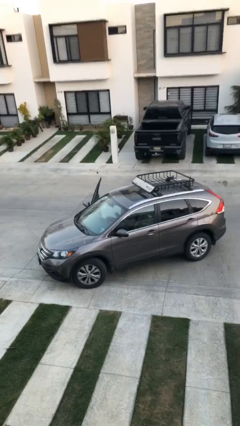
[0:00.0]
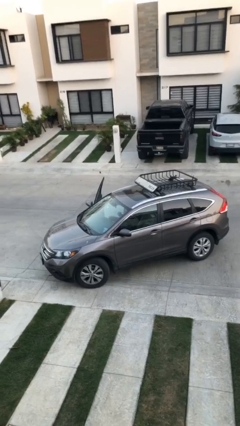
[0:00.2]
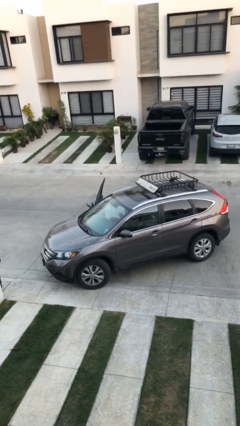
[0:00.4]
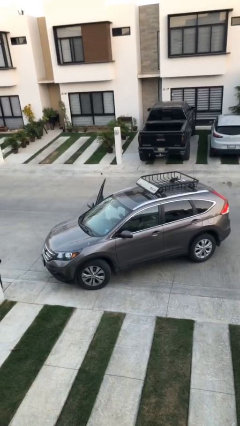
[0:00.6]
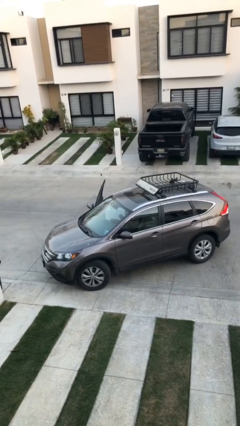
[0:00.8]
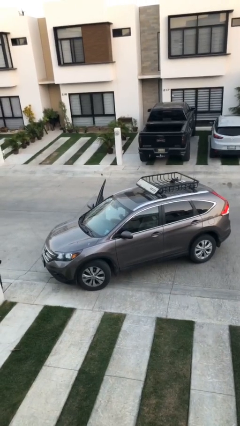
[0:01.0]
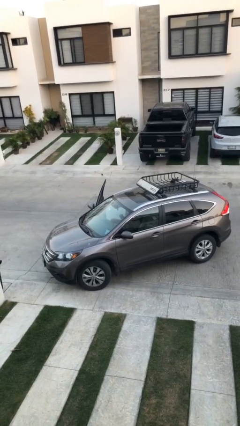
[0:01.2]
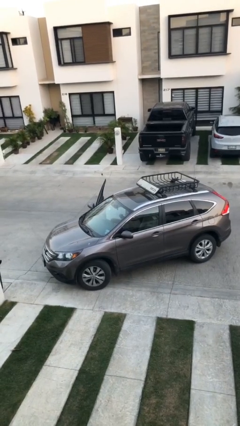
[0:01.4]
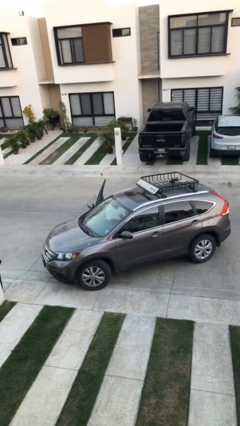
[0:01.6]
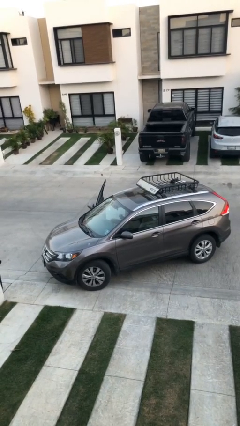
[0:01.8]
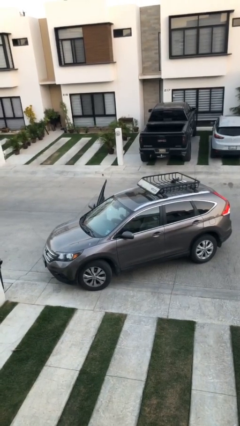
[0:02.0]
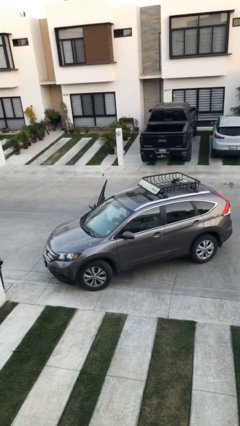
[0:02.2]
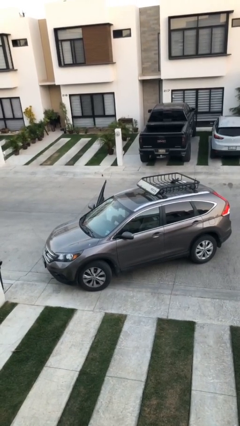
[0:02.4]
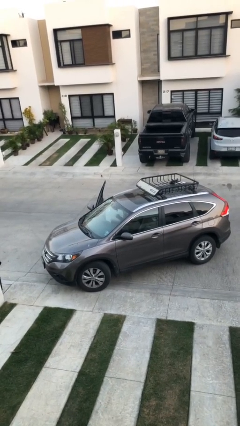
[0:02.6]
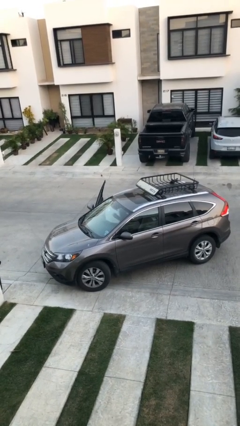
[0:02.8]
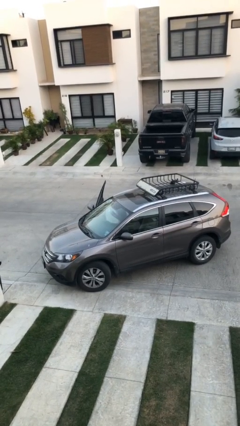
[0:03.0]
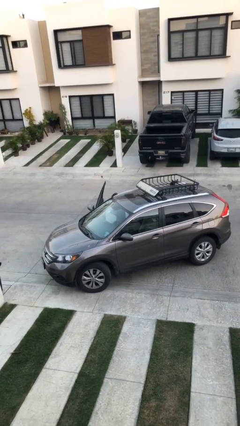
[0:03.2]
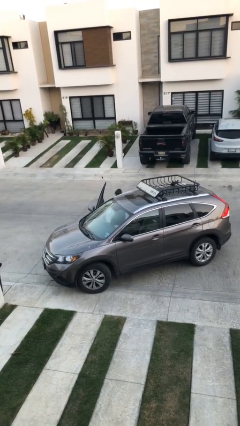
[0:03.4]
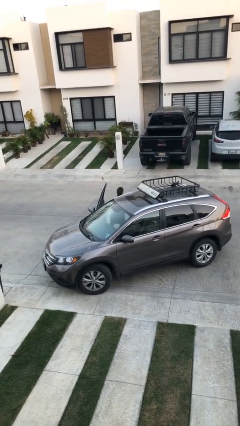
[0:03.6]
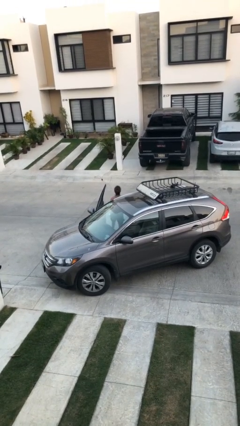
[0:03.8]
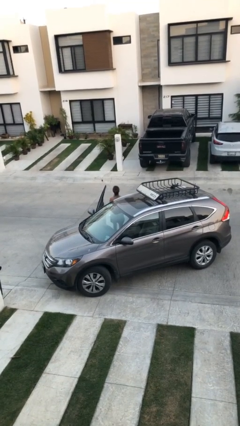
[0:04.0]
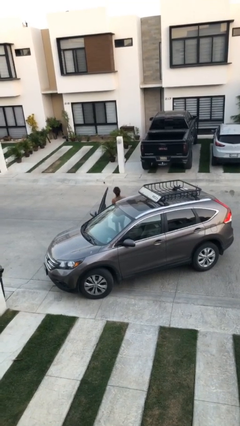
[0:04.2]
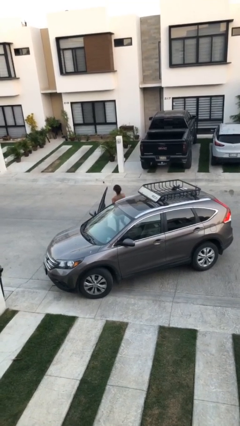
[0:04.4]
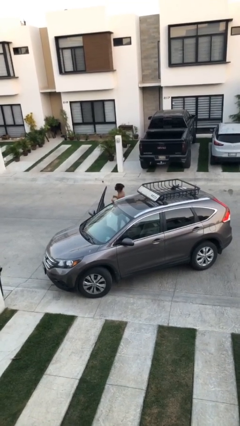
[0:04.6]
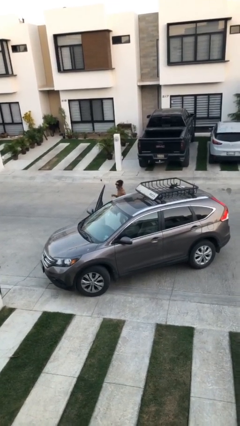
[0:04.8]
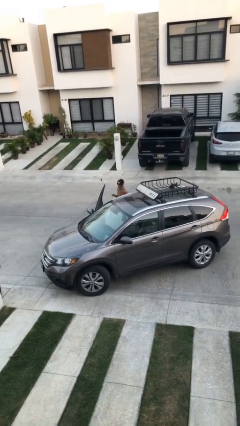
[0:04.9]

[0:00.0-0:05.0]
person exits car

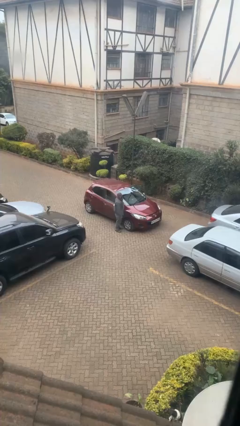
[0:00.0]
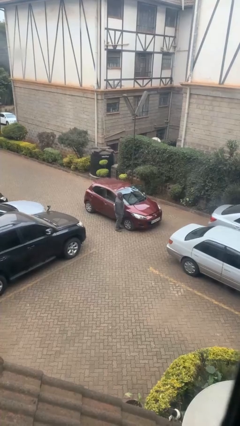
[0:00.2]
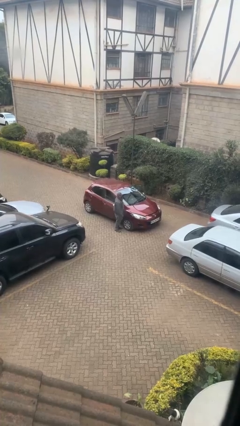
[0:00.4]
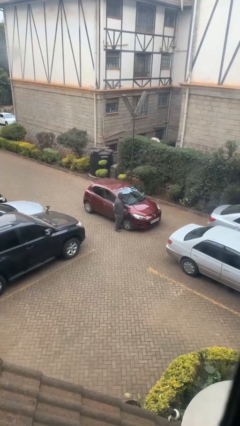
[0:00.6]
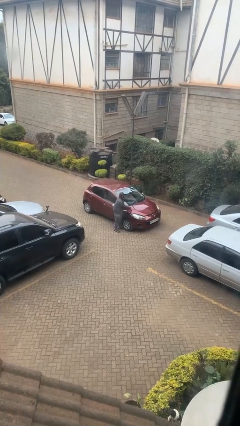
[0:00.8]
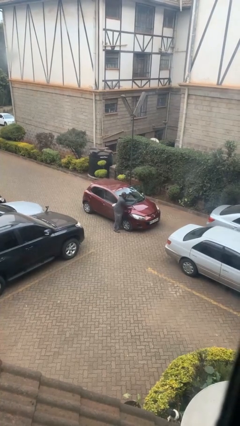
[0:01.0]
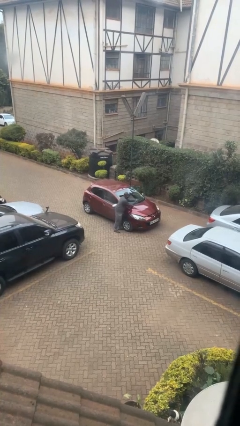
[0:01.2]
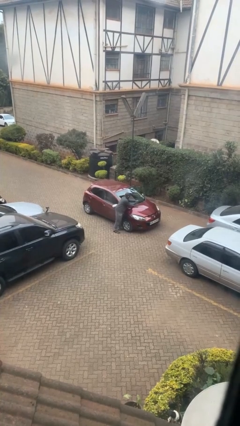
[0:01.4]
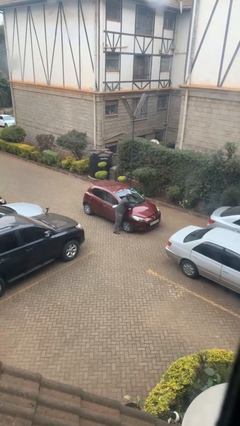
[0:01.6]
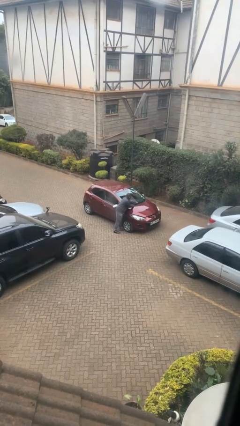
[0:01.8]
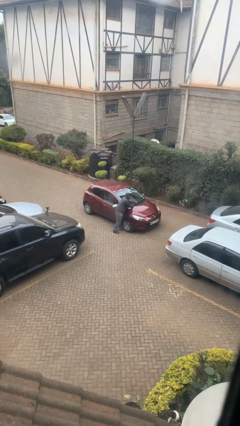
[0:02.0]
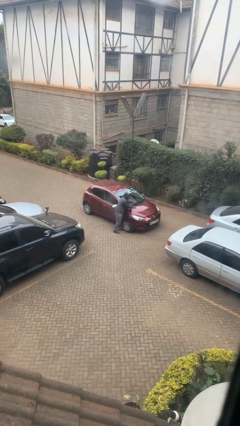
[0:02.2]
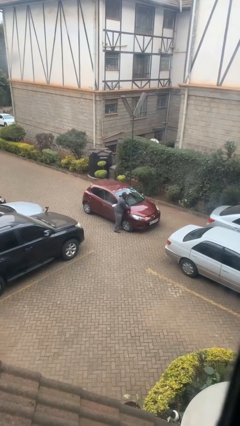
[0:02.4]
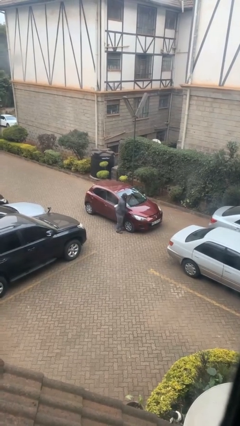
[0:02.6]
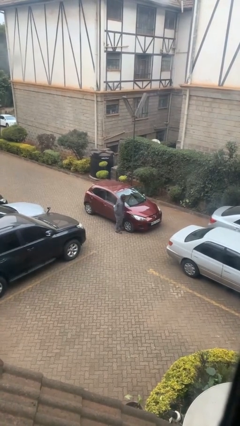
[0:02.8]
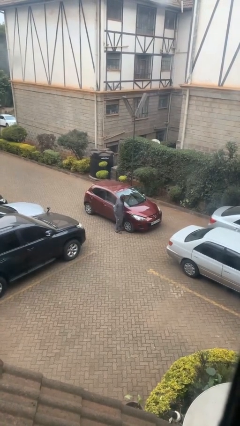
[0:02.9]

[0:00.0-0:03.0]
person flips down car wipers

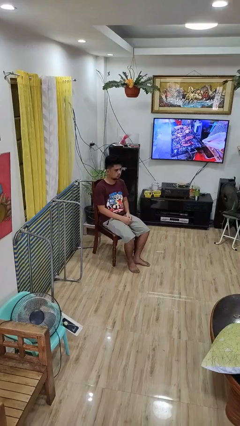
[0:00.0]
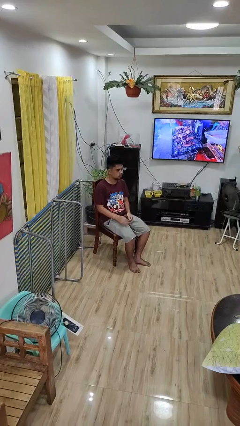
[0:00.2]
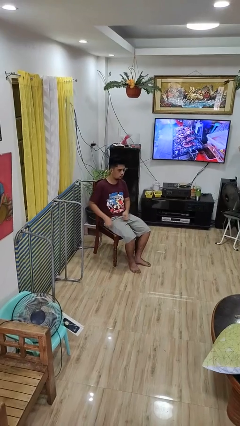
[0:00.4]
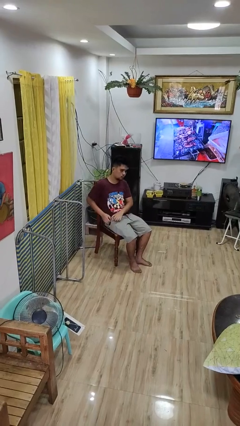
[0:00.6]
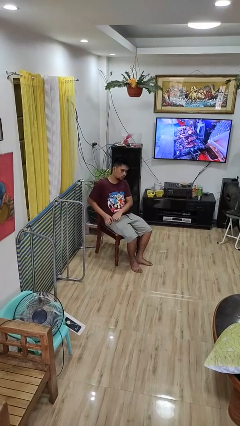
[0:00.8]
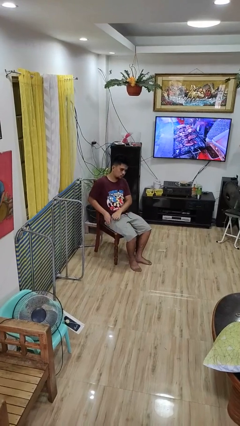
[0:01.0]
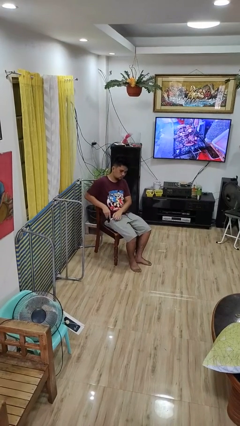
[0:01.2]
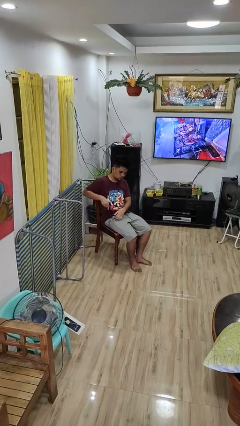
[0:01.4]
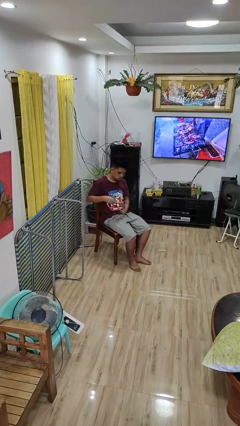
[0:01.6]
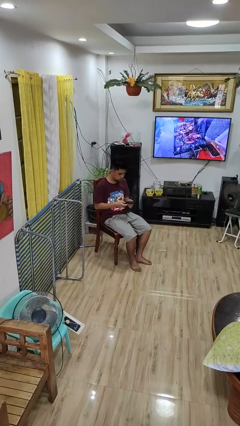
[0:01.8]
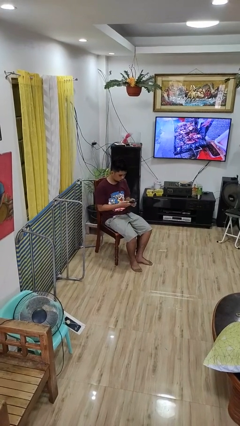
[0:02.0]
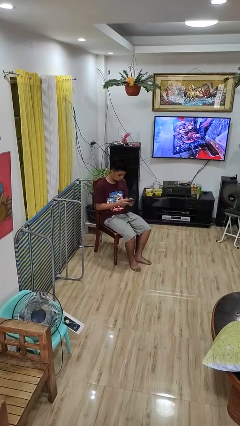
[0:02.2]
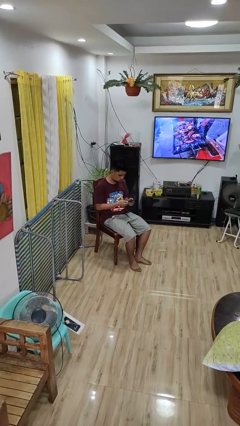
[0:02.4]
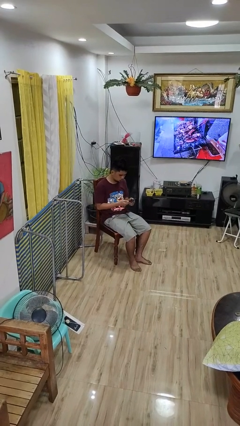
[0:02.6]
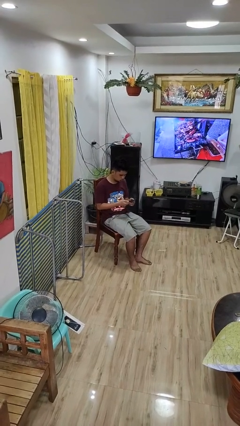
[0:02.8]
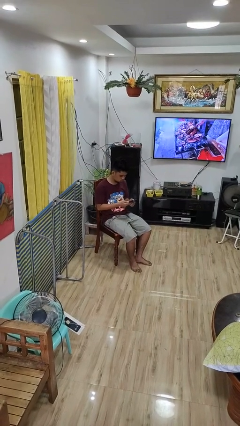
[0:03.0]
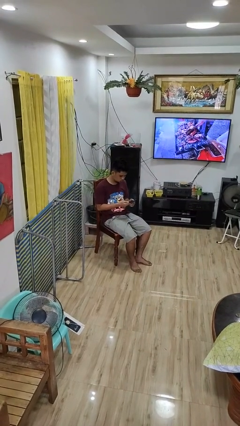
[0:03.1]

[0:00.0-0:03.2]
person takes phone from pocket

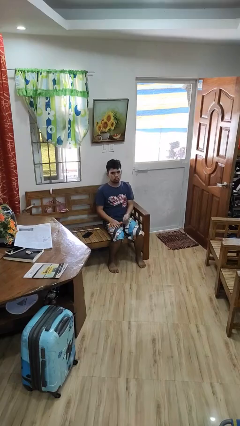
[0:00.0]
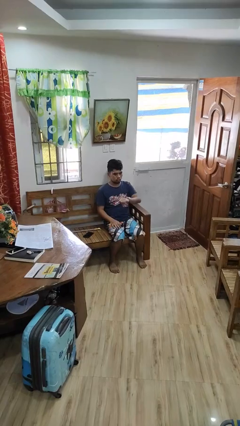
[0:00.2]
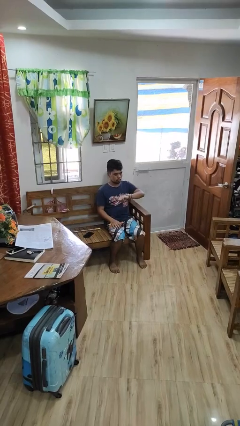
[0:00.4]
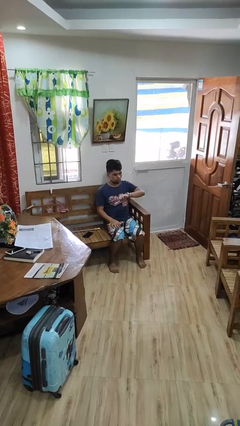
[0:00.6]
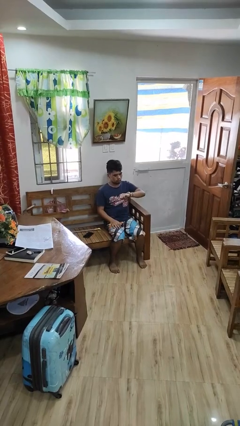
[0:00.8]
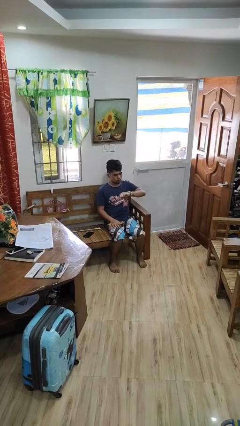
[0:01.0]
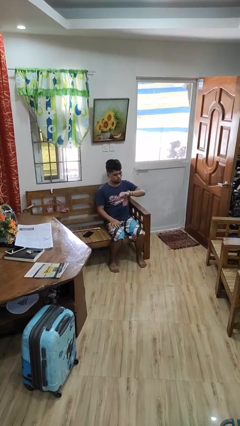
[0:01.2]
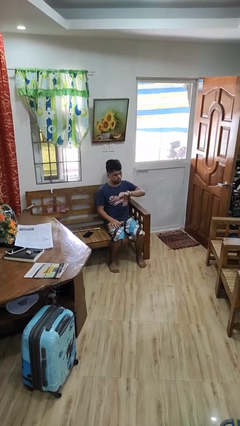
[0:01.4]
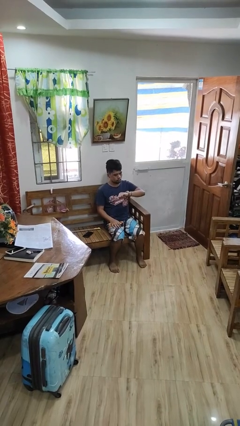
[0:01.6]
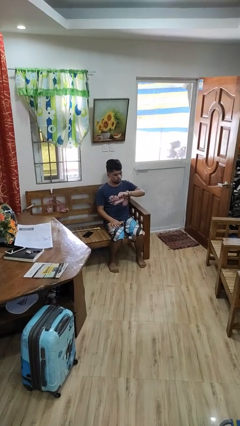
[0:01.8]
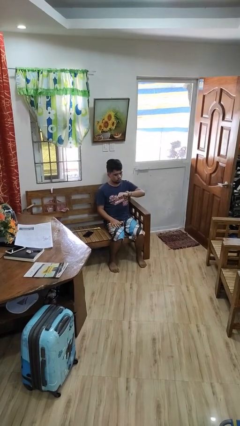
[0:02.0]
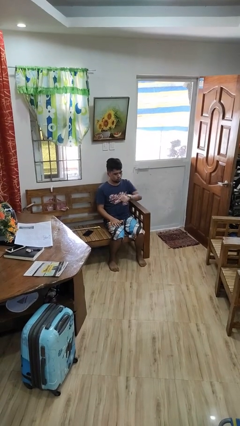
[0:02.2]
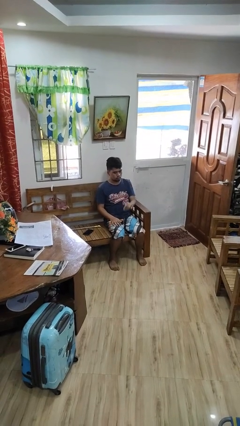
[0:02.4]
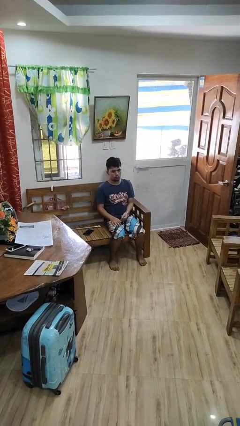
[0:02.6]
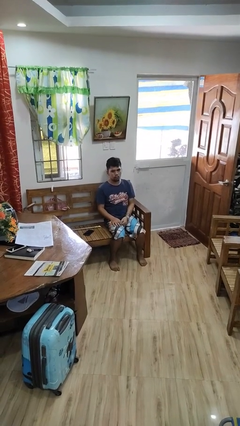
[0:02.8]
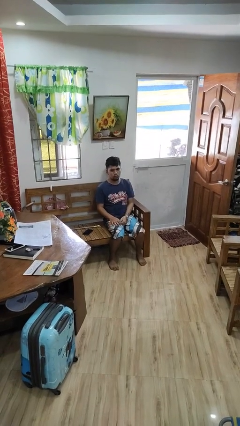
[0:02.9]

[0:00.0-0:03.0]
person looks at wristwatch

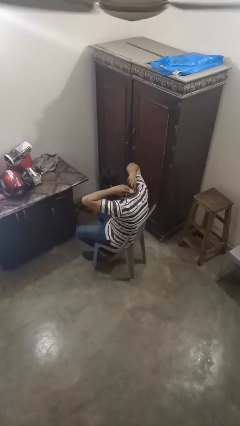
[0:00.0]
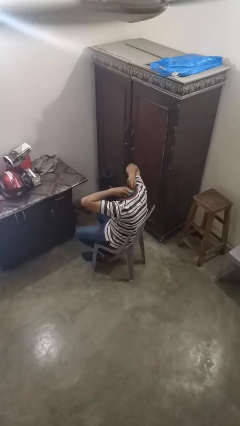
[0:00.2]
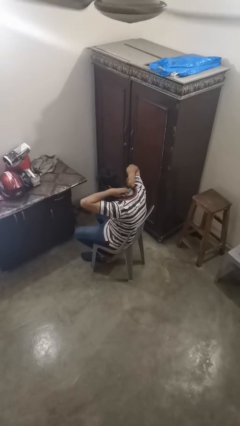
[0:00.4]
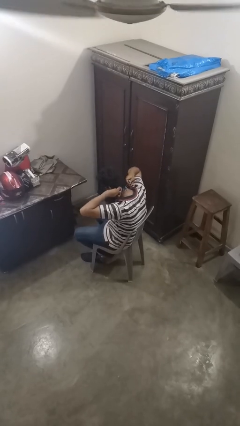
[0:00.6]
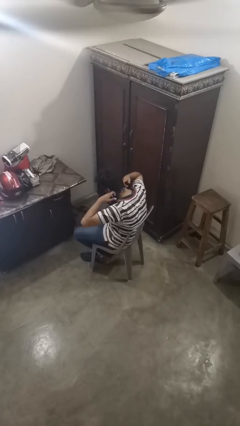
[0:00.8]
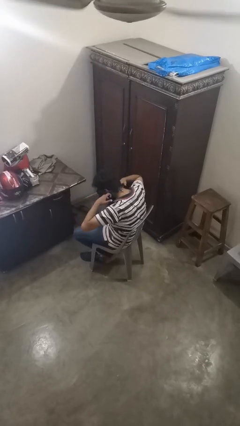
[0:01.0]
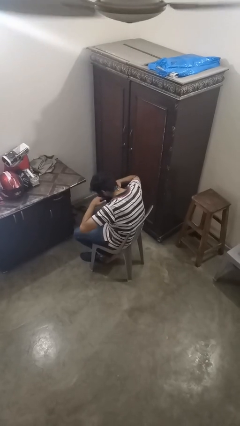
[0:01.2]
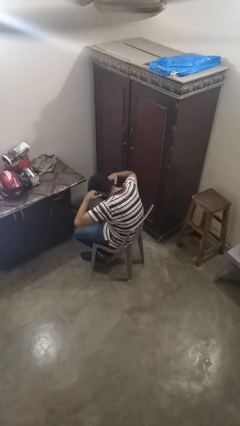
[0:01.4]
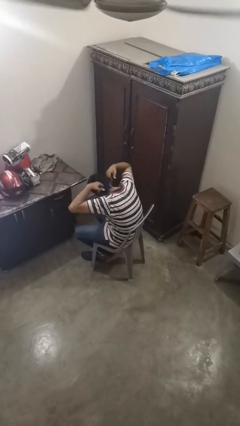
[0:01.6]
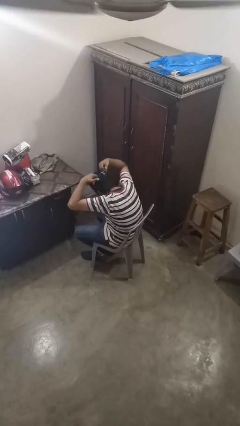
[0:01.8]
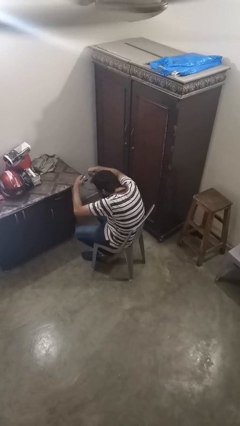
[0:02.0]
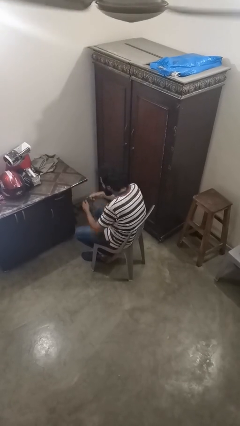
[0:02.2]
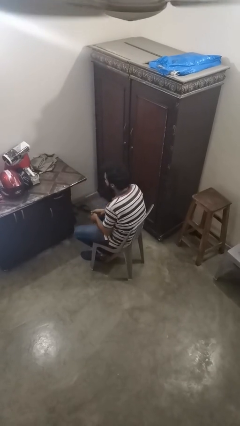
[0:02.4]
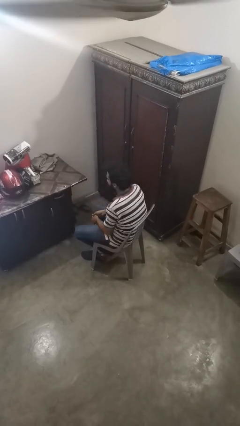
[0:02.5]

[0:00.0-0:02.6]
person takes off necklace

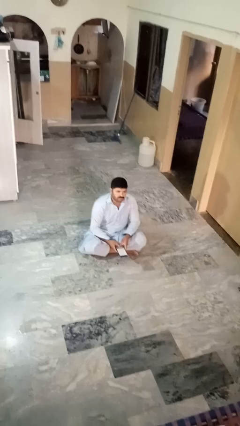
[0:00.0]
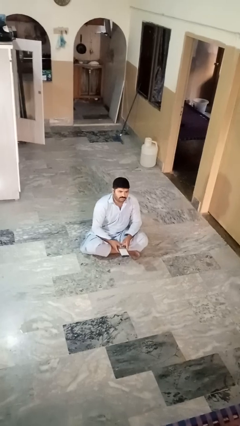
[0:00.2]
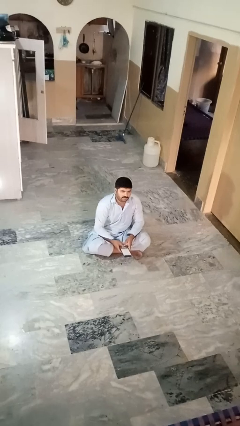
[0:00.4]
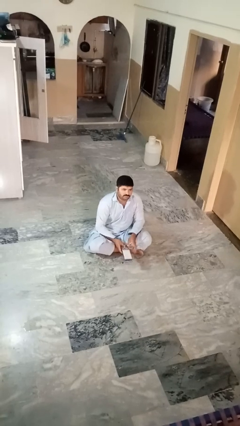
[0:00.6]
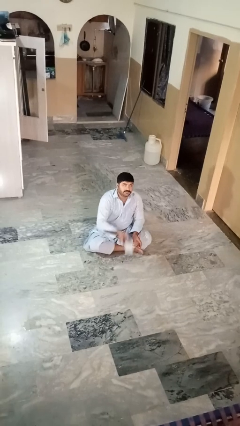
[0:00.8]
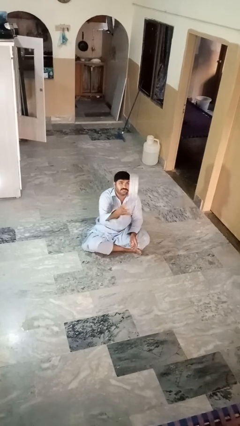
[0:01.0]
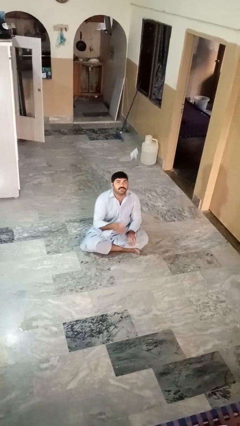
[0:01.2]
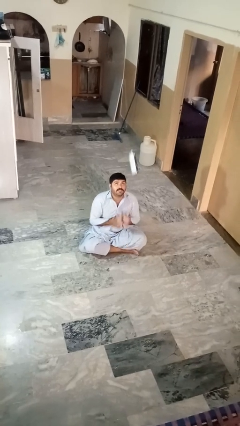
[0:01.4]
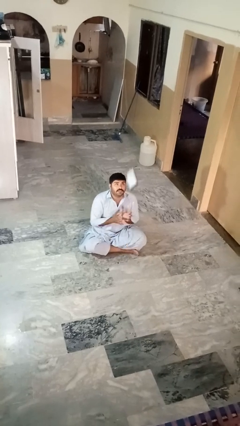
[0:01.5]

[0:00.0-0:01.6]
person drops object
